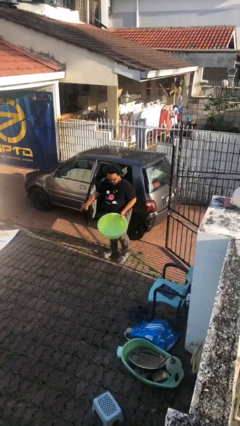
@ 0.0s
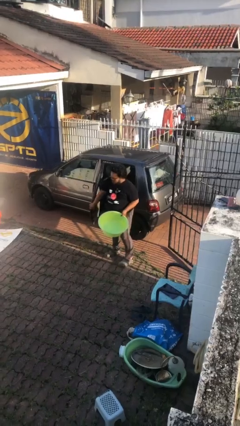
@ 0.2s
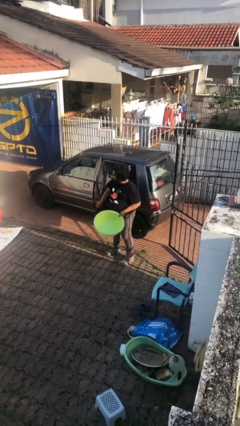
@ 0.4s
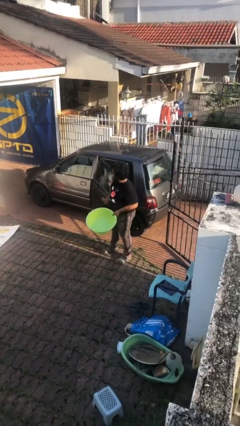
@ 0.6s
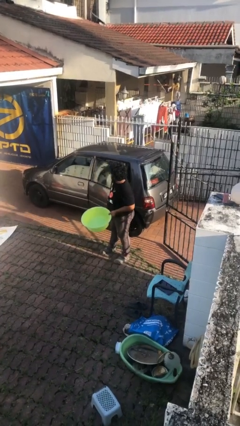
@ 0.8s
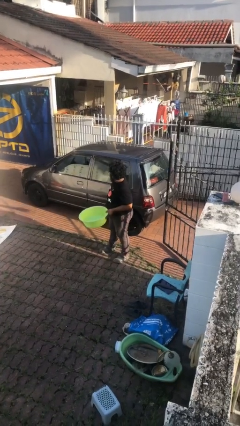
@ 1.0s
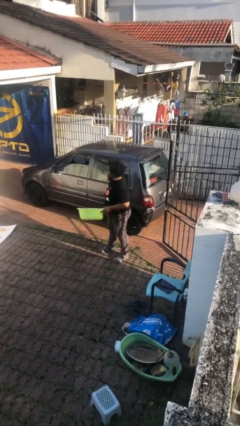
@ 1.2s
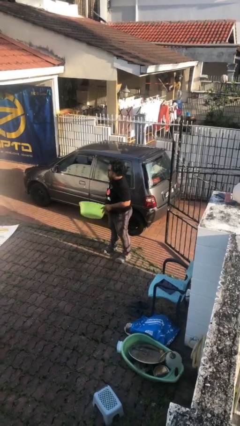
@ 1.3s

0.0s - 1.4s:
person closes car door

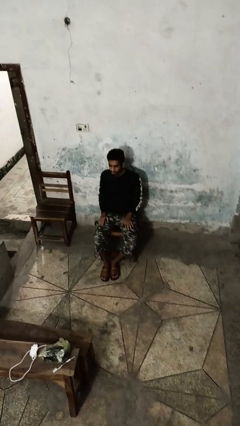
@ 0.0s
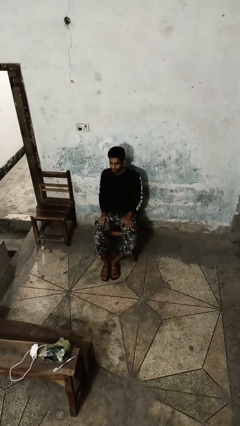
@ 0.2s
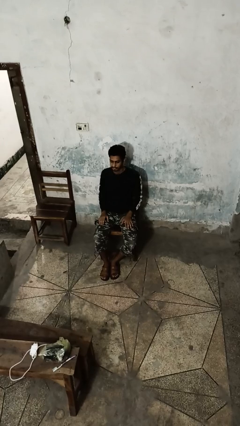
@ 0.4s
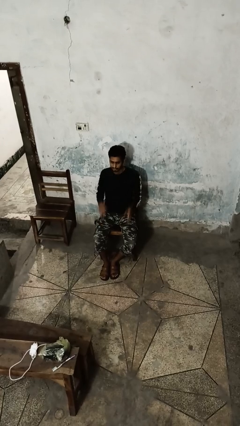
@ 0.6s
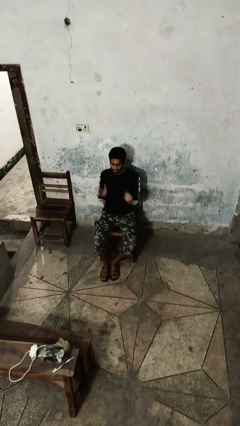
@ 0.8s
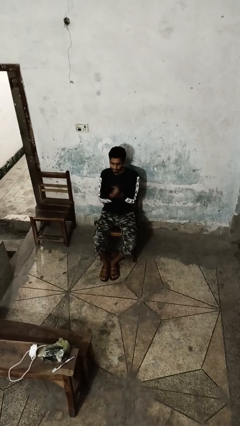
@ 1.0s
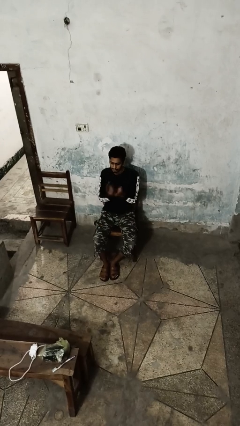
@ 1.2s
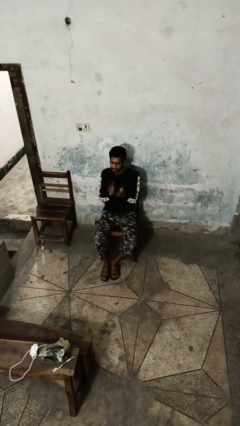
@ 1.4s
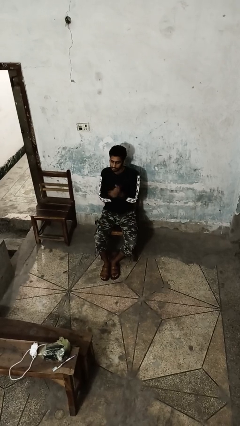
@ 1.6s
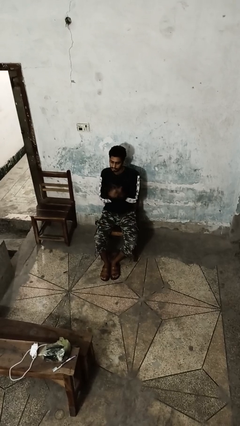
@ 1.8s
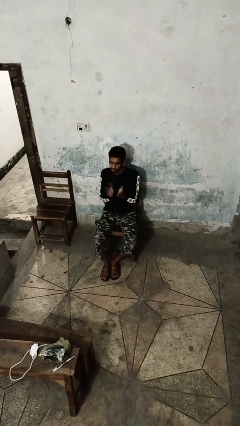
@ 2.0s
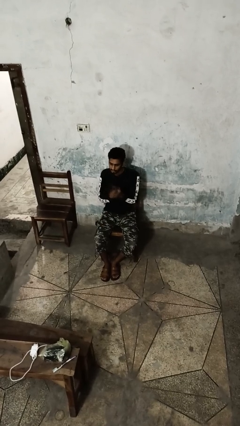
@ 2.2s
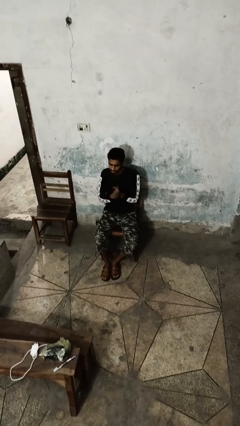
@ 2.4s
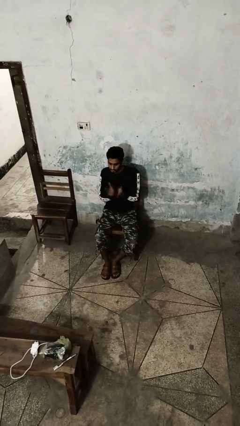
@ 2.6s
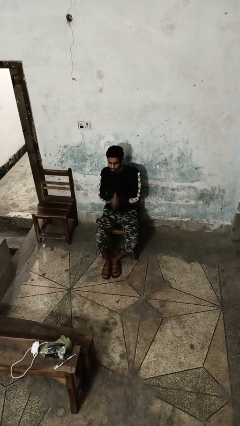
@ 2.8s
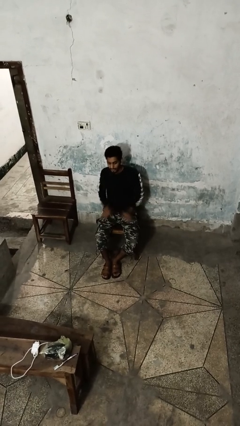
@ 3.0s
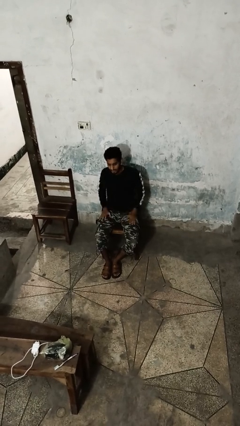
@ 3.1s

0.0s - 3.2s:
person claps hands

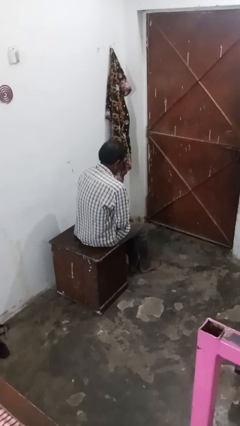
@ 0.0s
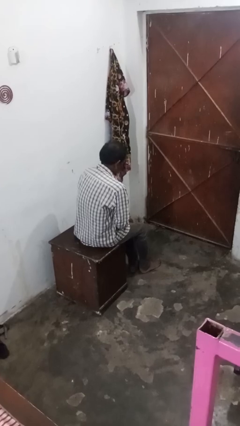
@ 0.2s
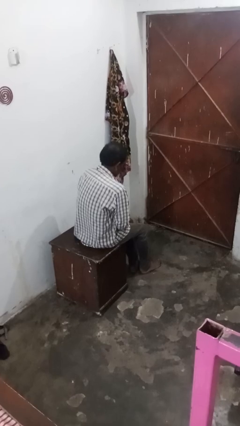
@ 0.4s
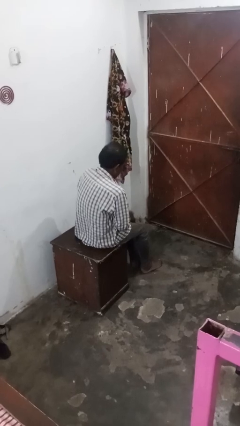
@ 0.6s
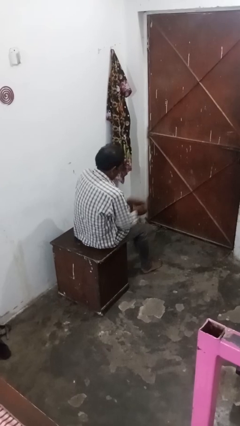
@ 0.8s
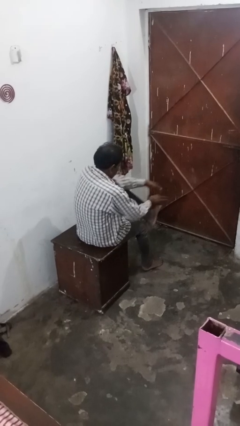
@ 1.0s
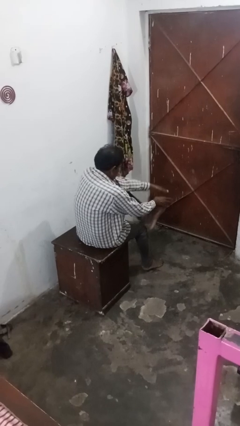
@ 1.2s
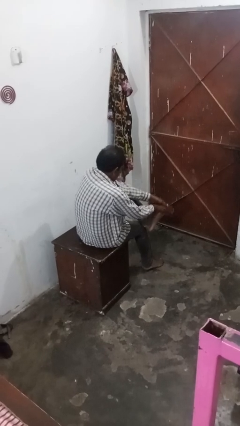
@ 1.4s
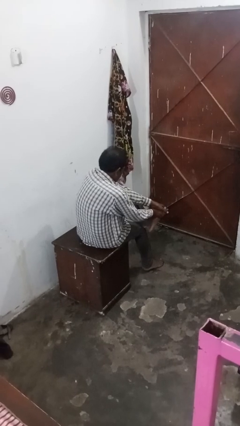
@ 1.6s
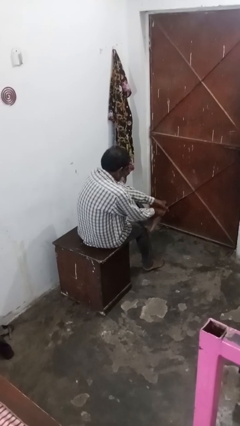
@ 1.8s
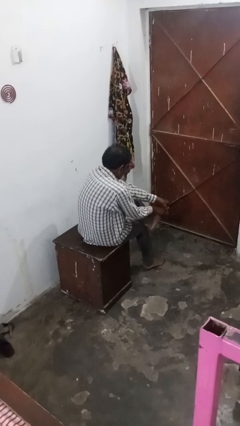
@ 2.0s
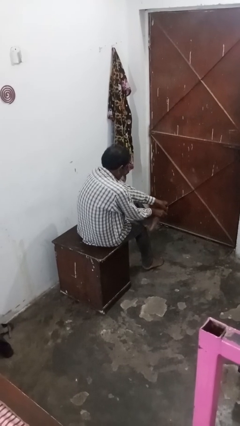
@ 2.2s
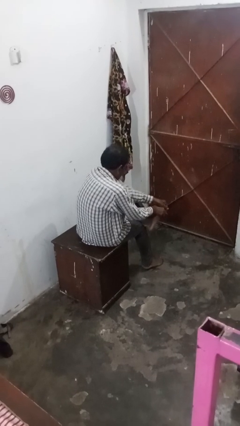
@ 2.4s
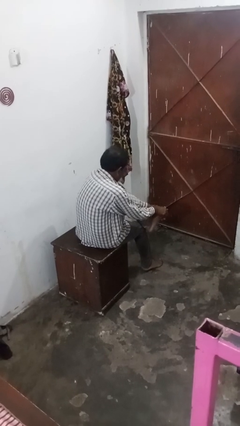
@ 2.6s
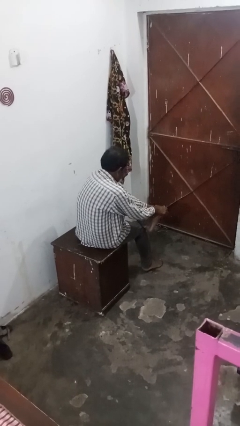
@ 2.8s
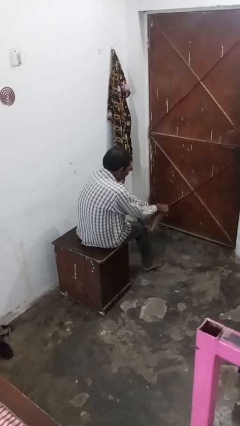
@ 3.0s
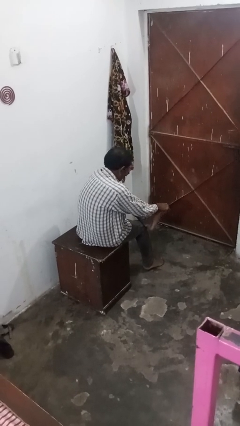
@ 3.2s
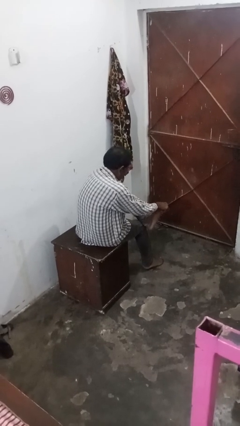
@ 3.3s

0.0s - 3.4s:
person rubs foot

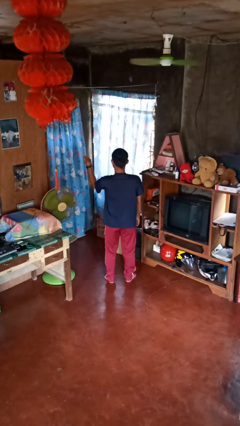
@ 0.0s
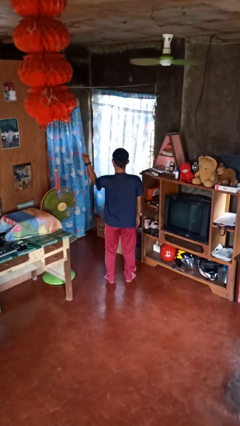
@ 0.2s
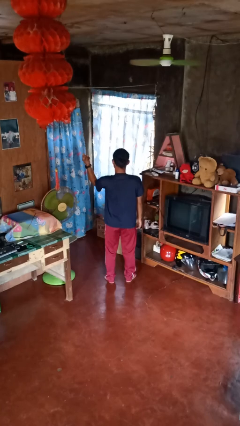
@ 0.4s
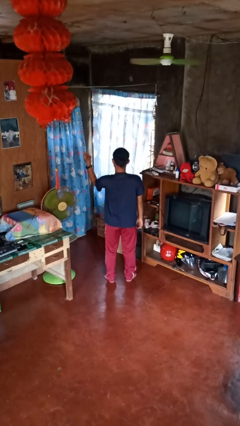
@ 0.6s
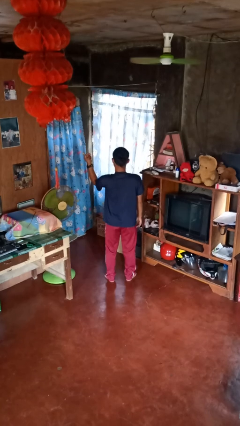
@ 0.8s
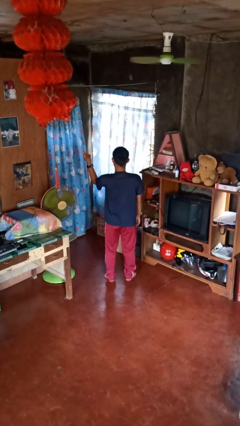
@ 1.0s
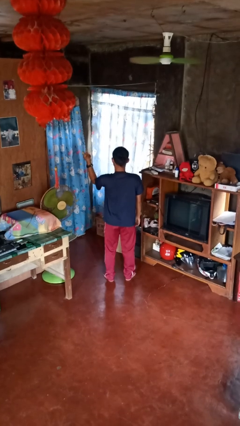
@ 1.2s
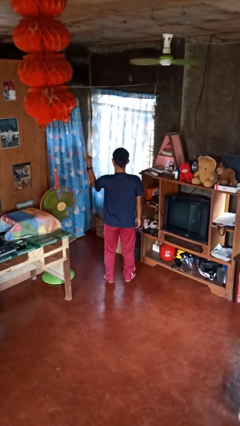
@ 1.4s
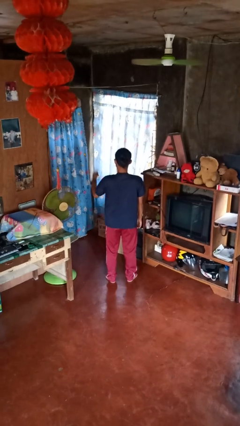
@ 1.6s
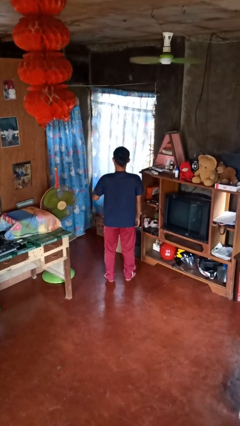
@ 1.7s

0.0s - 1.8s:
person snaps fingers

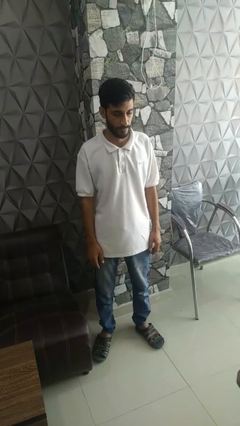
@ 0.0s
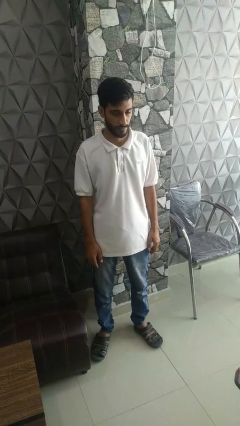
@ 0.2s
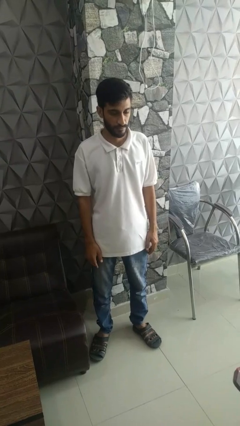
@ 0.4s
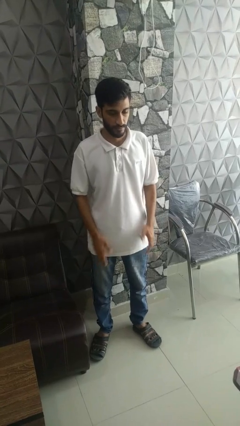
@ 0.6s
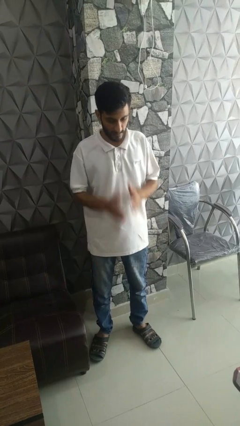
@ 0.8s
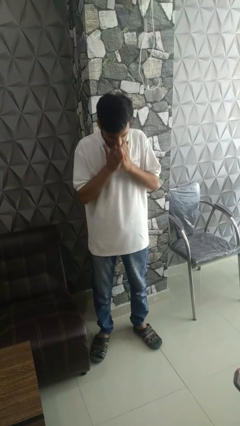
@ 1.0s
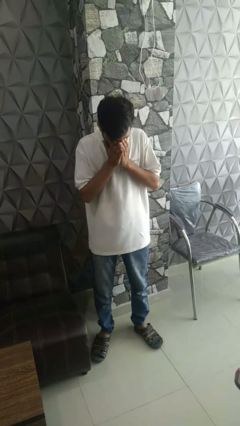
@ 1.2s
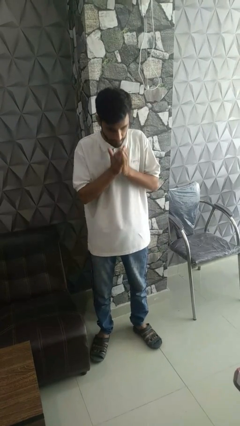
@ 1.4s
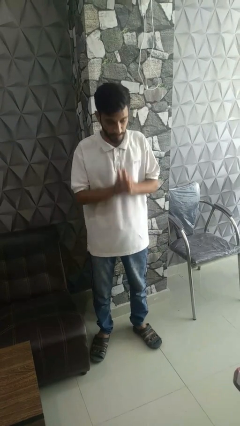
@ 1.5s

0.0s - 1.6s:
person sneezes into hand

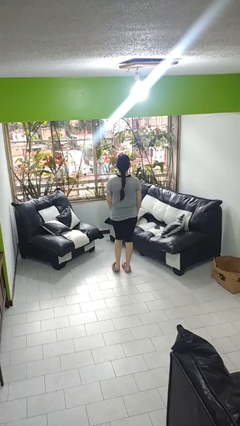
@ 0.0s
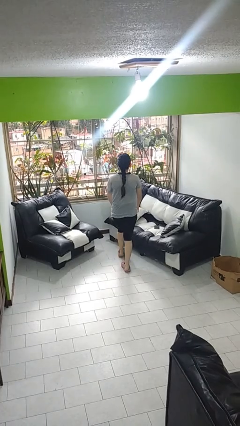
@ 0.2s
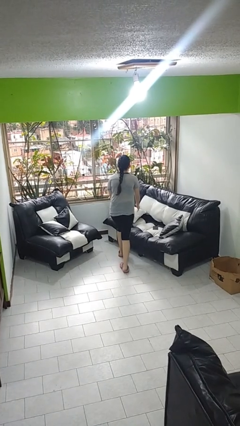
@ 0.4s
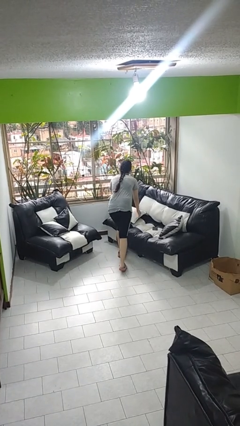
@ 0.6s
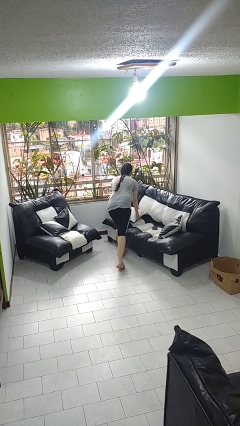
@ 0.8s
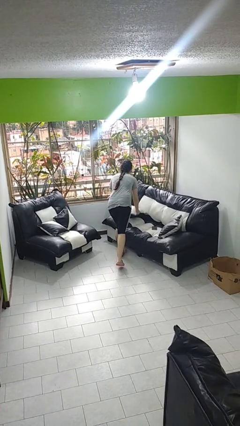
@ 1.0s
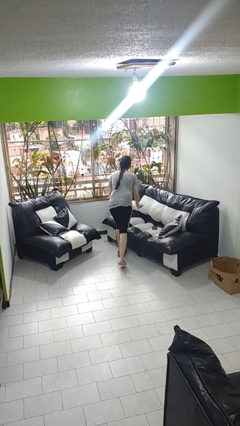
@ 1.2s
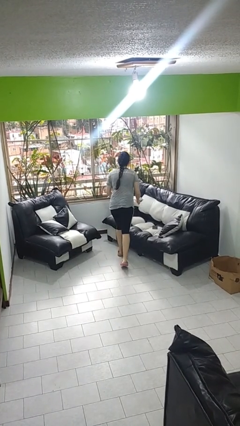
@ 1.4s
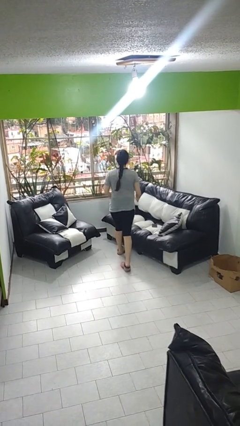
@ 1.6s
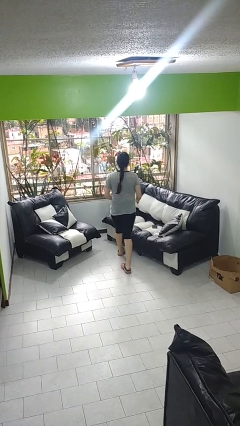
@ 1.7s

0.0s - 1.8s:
person picks up object from couch

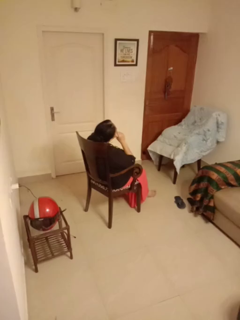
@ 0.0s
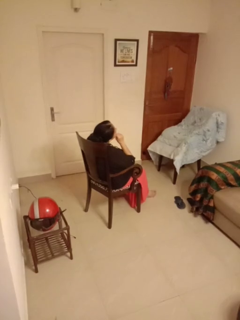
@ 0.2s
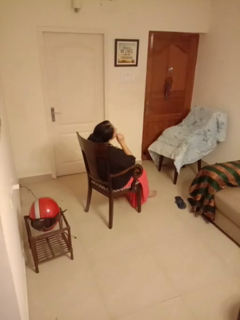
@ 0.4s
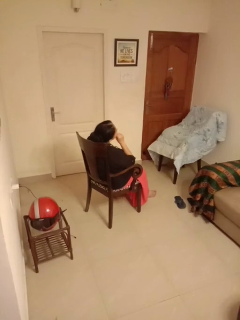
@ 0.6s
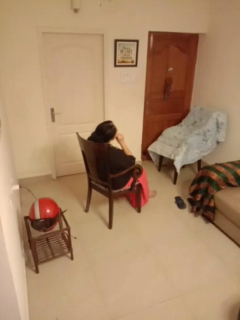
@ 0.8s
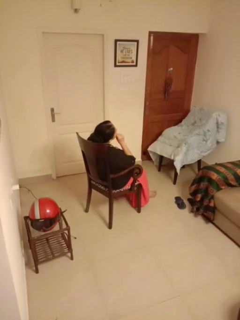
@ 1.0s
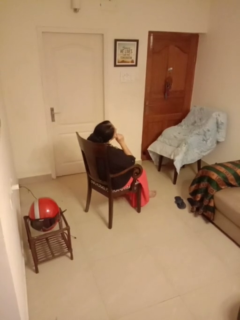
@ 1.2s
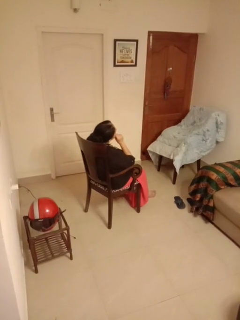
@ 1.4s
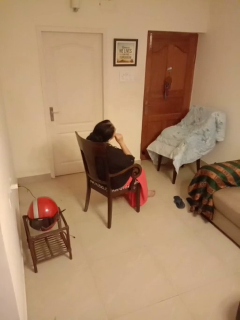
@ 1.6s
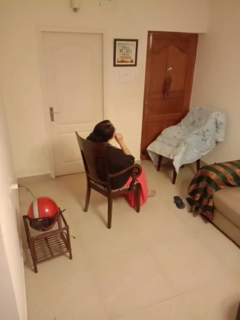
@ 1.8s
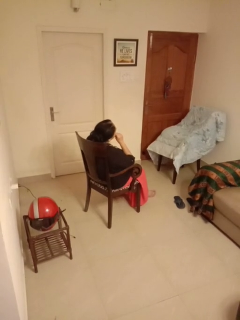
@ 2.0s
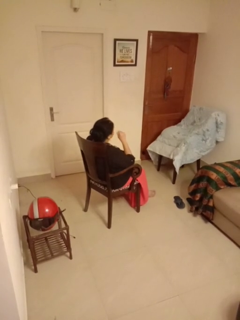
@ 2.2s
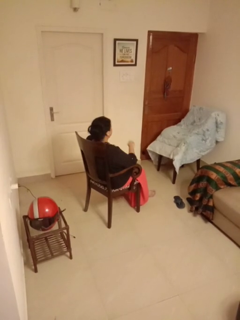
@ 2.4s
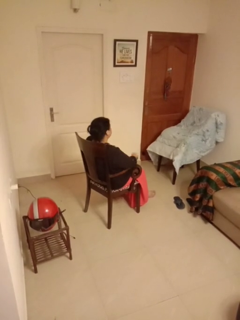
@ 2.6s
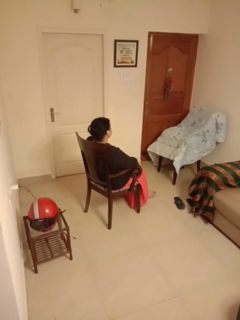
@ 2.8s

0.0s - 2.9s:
person strokes chin

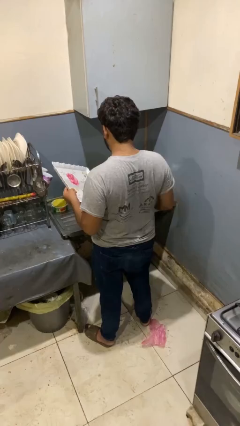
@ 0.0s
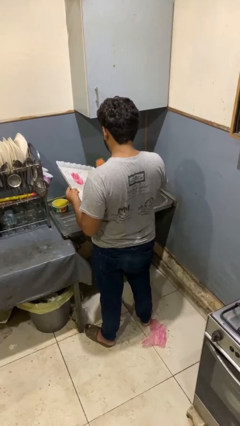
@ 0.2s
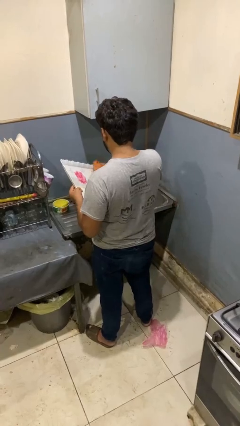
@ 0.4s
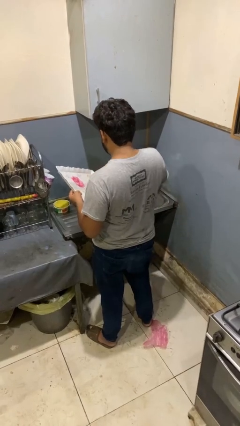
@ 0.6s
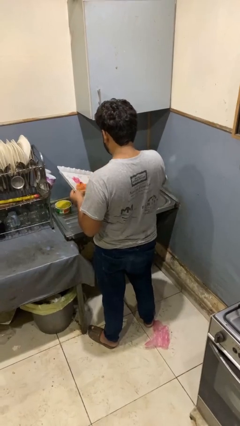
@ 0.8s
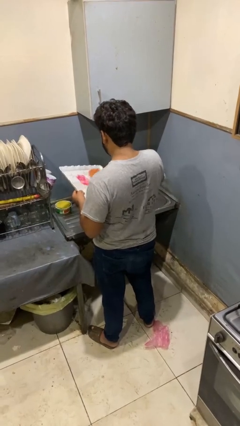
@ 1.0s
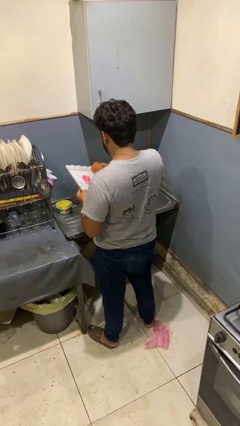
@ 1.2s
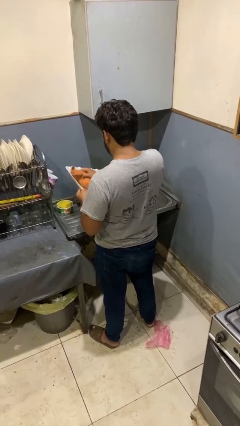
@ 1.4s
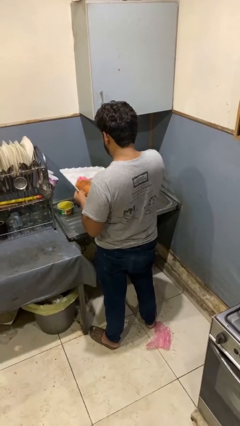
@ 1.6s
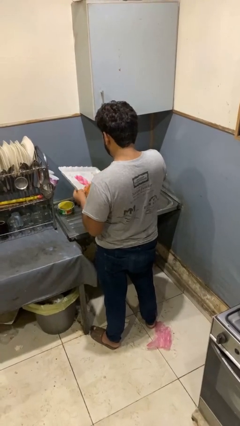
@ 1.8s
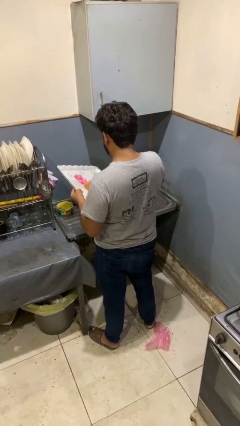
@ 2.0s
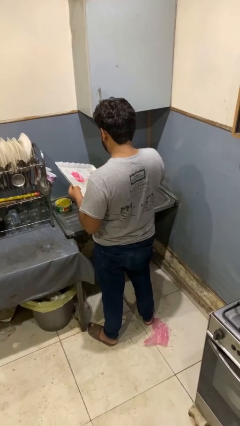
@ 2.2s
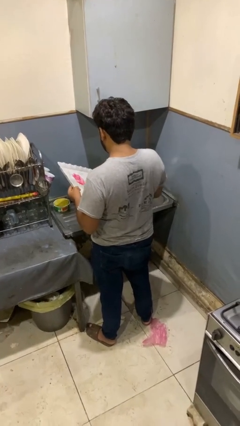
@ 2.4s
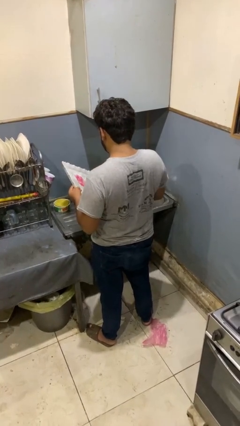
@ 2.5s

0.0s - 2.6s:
person dries dish
